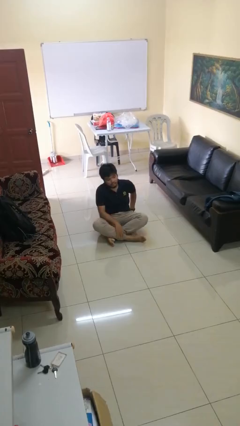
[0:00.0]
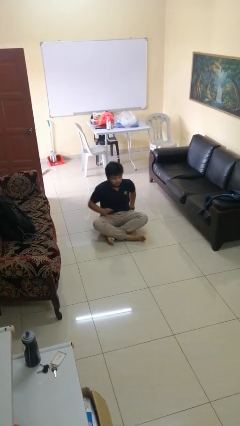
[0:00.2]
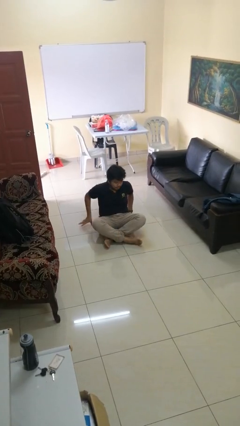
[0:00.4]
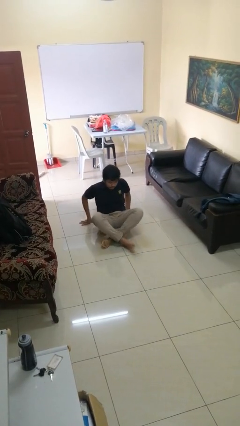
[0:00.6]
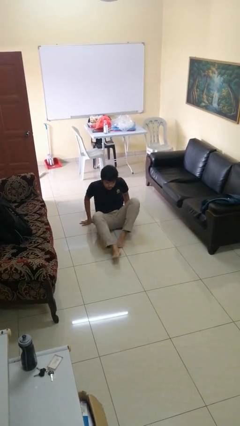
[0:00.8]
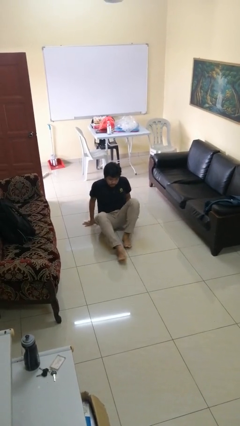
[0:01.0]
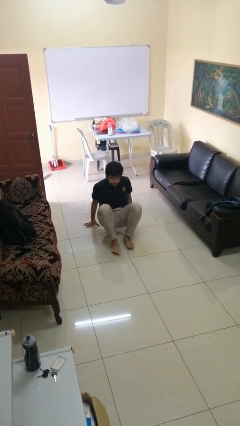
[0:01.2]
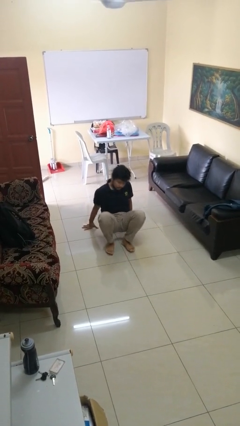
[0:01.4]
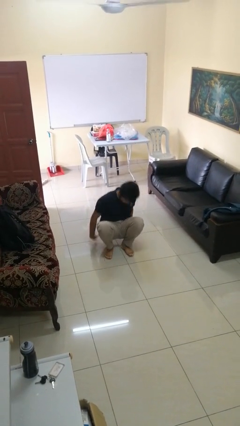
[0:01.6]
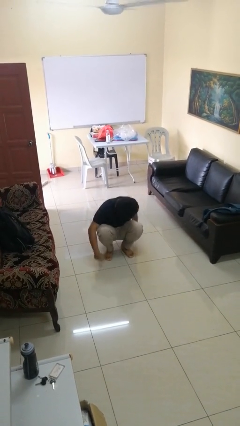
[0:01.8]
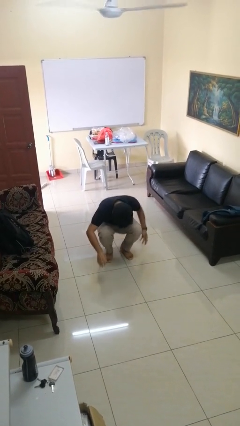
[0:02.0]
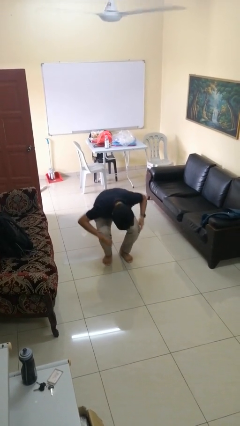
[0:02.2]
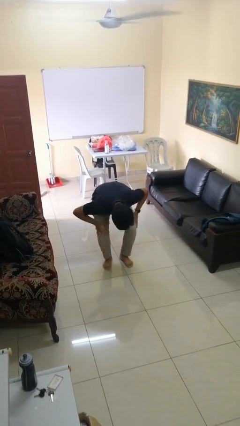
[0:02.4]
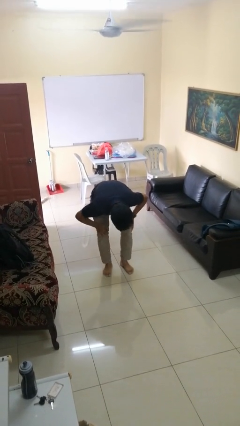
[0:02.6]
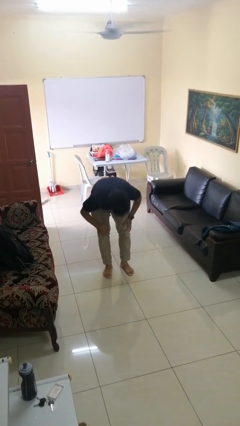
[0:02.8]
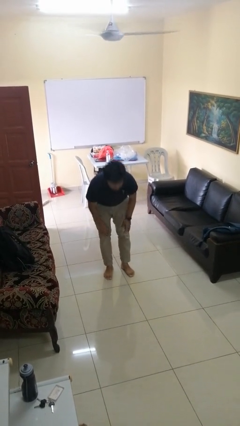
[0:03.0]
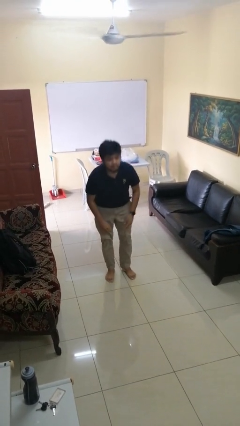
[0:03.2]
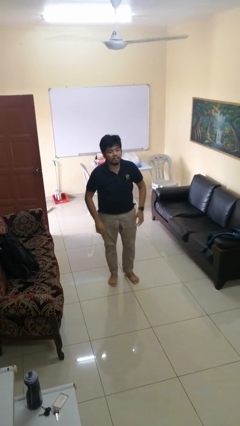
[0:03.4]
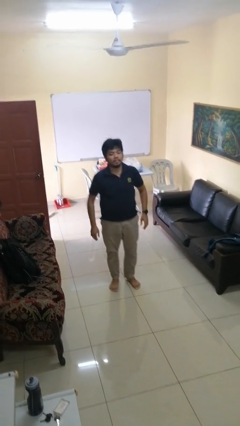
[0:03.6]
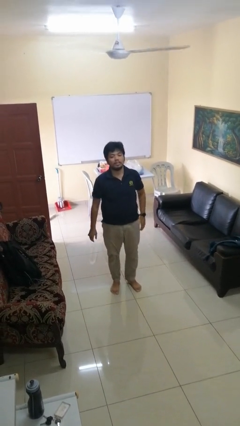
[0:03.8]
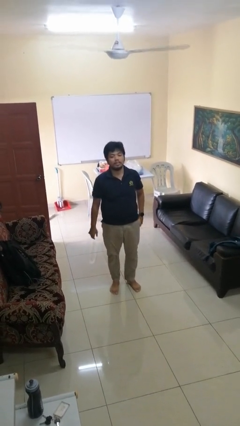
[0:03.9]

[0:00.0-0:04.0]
person stands up from floor

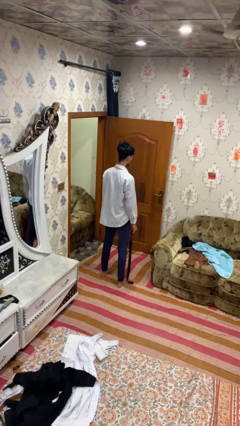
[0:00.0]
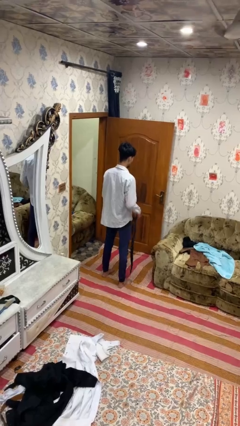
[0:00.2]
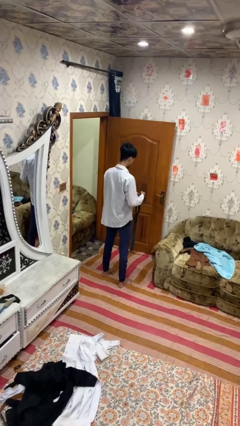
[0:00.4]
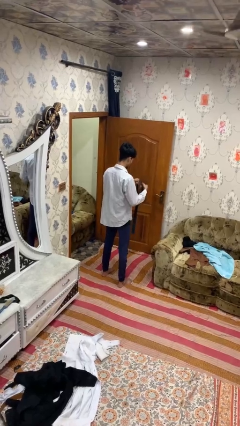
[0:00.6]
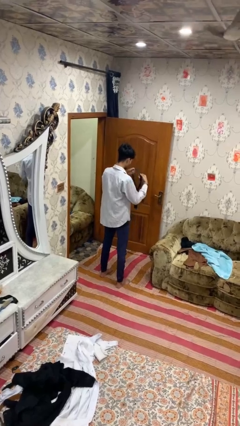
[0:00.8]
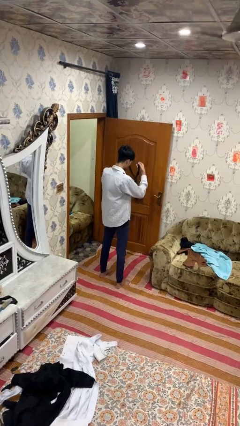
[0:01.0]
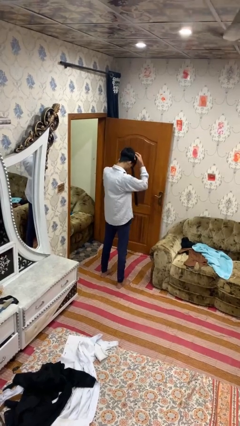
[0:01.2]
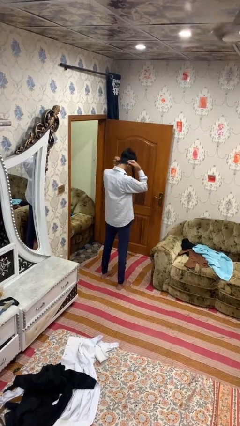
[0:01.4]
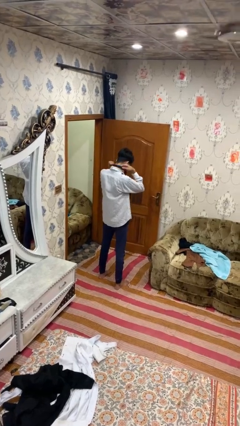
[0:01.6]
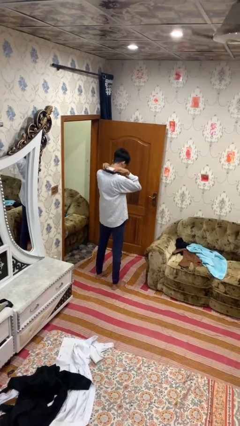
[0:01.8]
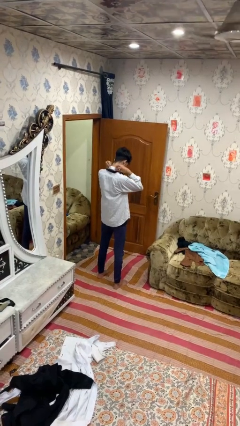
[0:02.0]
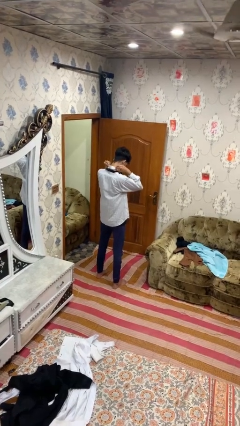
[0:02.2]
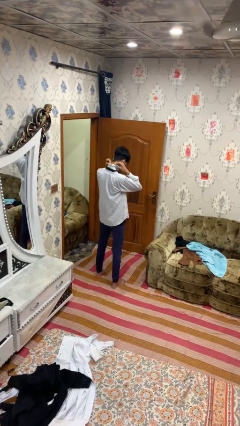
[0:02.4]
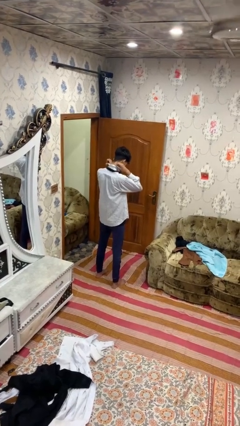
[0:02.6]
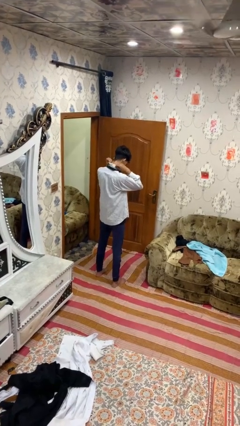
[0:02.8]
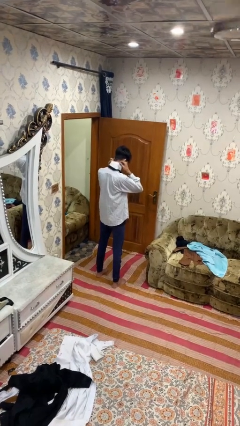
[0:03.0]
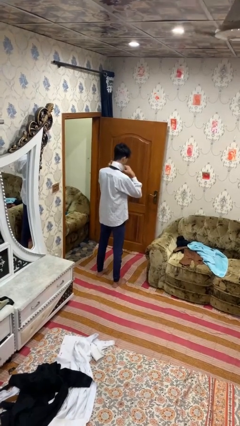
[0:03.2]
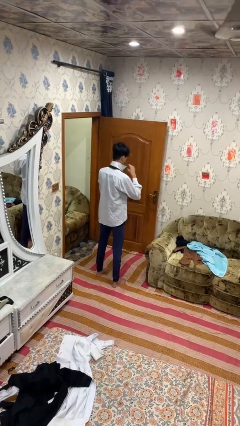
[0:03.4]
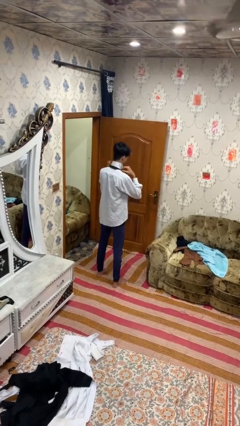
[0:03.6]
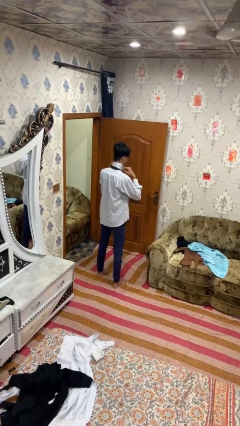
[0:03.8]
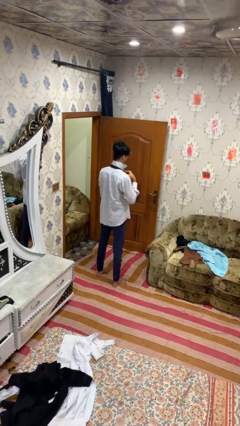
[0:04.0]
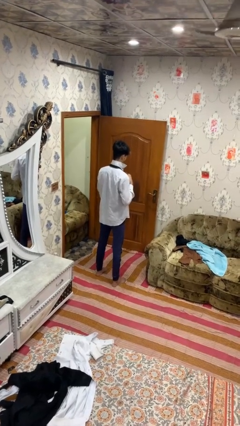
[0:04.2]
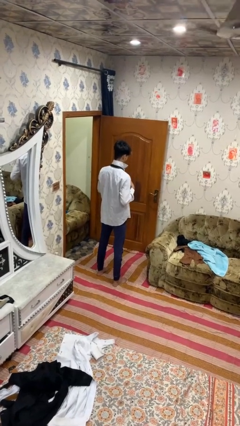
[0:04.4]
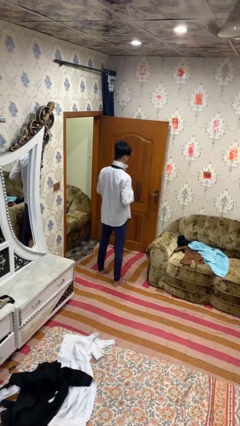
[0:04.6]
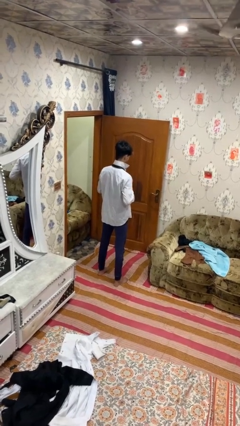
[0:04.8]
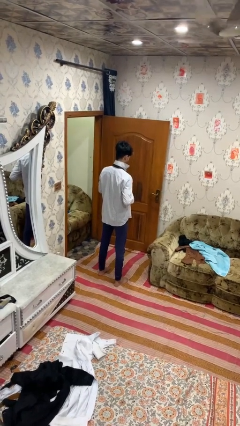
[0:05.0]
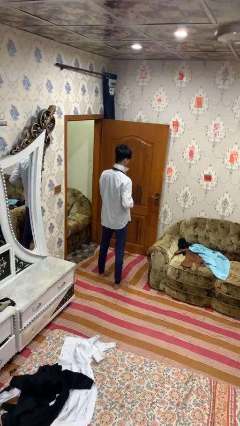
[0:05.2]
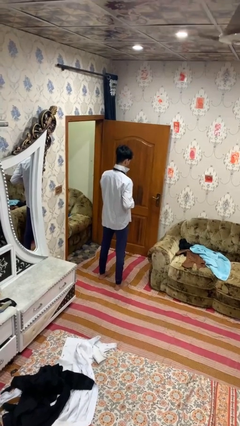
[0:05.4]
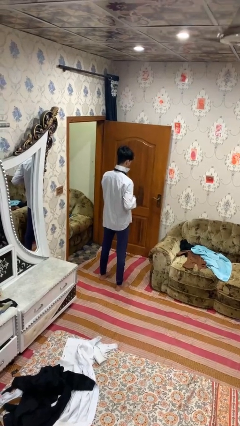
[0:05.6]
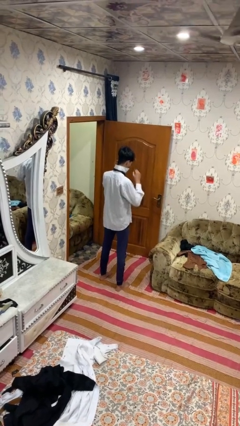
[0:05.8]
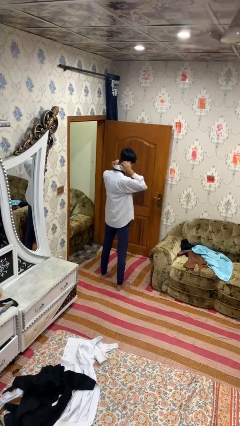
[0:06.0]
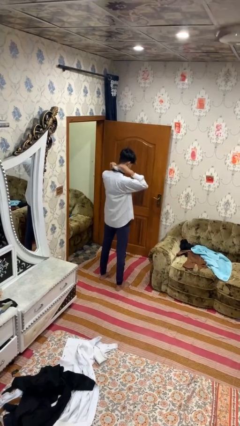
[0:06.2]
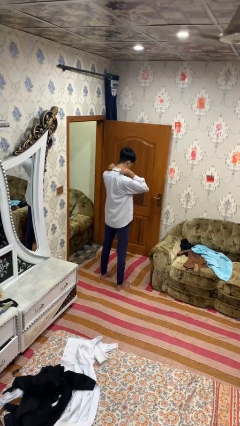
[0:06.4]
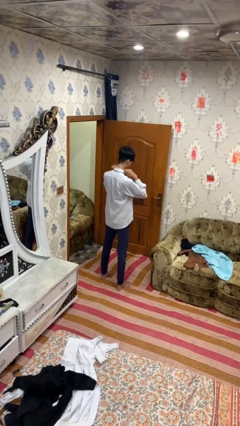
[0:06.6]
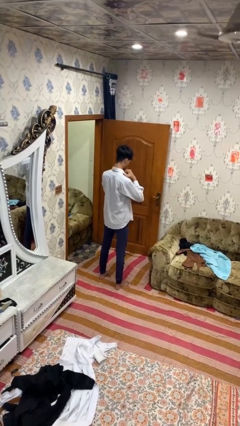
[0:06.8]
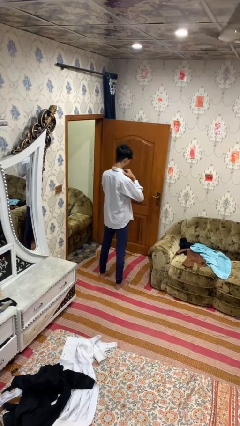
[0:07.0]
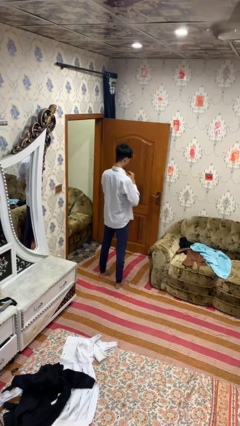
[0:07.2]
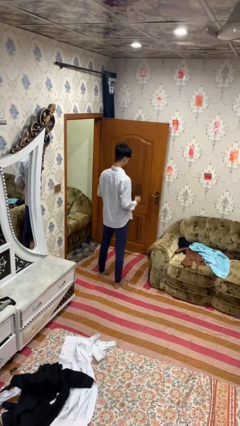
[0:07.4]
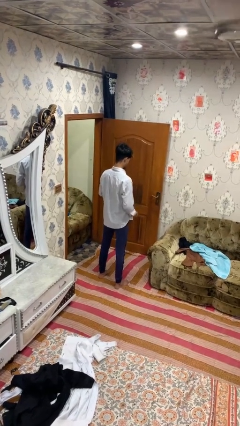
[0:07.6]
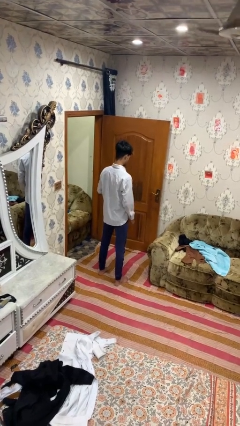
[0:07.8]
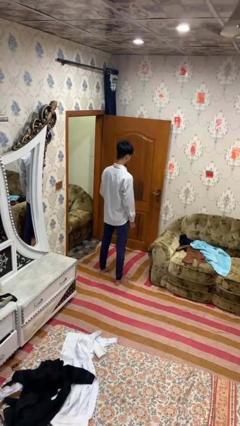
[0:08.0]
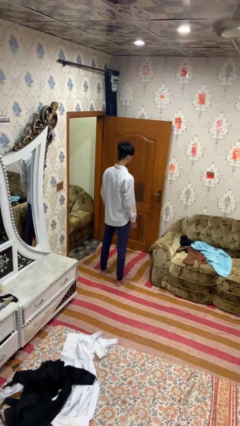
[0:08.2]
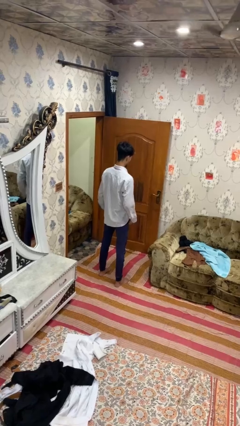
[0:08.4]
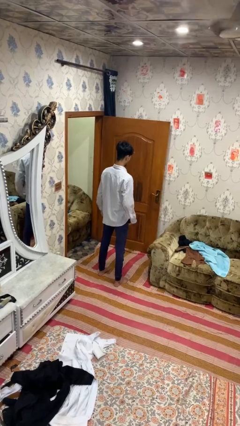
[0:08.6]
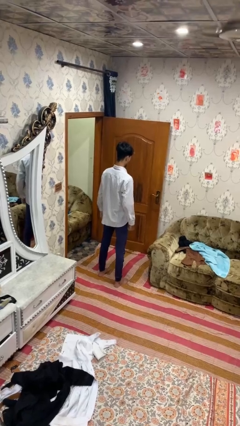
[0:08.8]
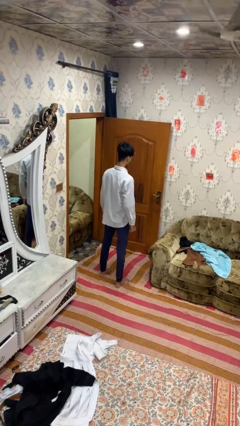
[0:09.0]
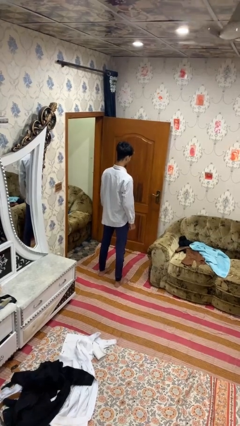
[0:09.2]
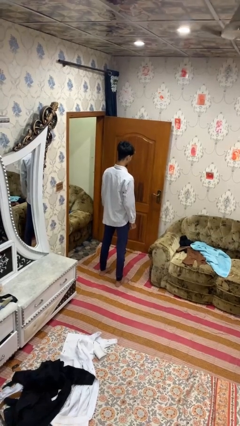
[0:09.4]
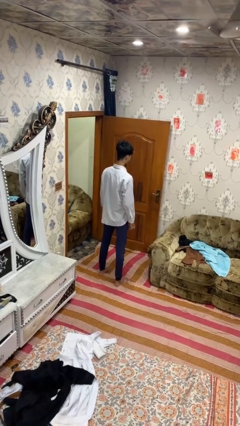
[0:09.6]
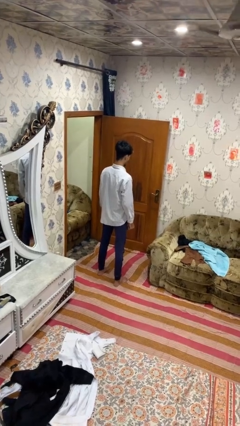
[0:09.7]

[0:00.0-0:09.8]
person puts on necktie

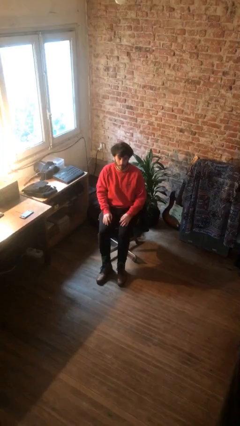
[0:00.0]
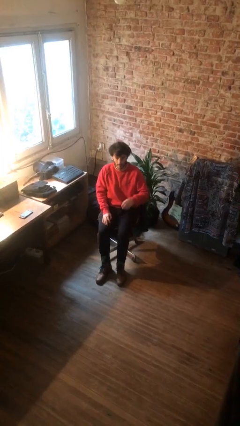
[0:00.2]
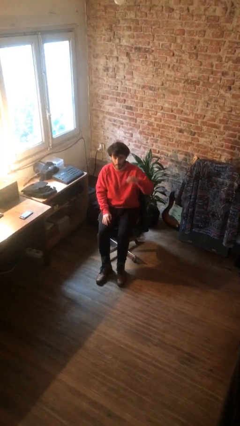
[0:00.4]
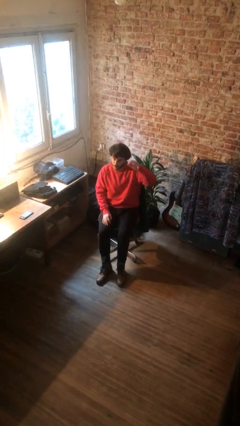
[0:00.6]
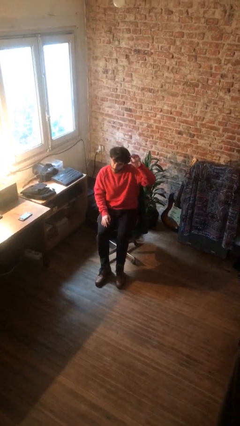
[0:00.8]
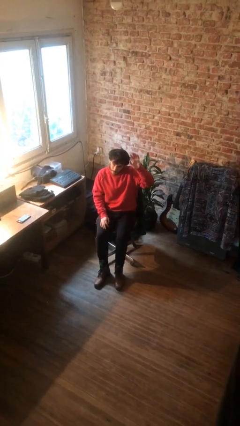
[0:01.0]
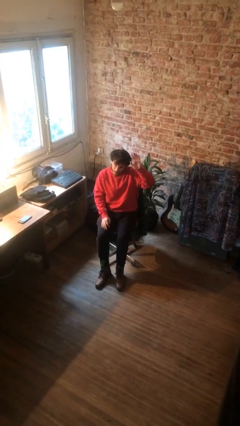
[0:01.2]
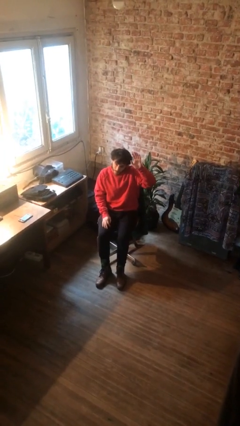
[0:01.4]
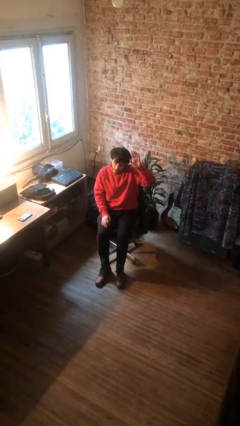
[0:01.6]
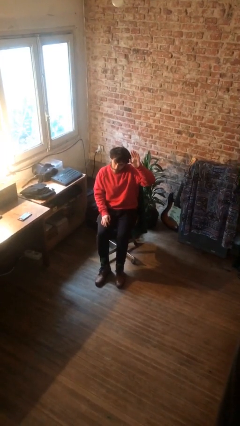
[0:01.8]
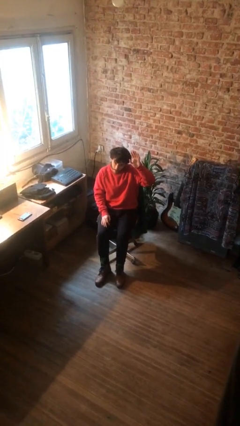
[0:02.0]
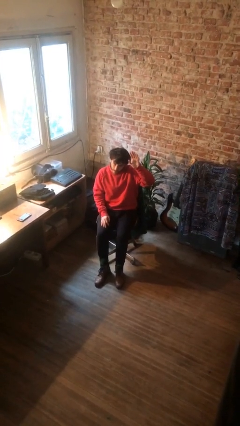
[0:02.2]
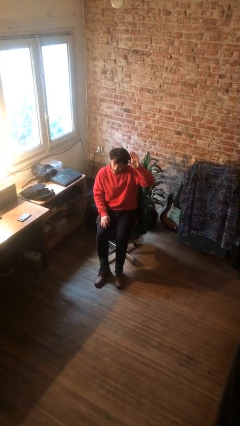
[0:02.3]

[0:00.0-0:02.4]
person gestures raise hand

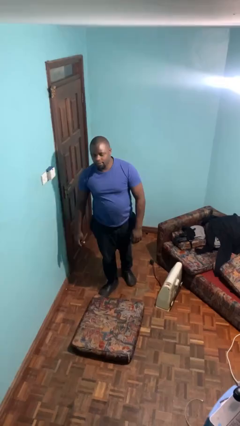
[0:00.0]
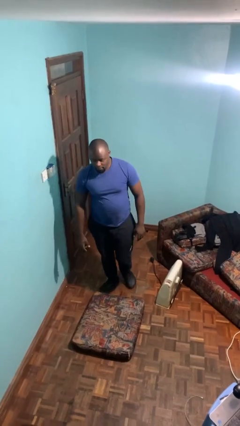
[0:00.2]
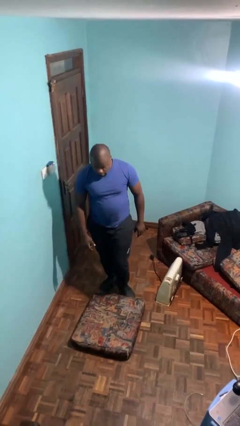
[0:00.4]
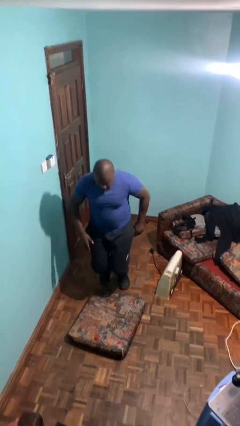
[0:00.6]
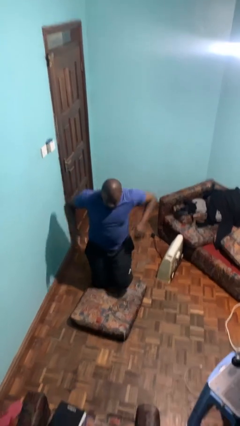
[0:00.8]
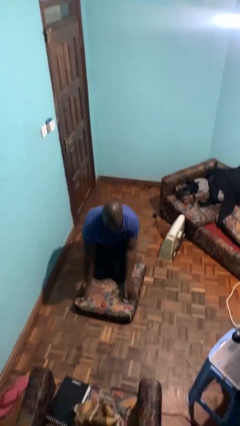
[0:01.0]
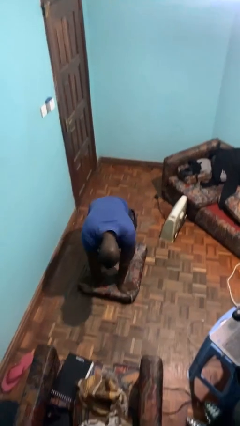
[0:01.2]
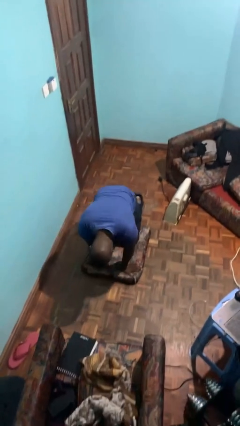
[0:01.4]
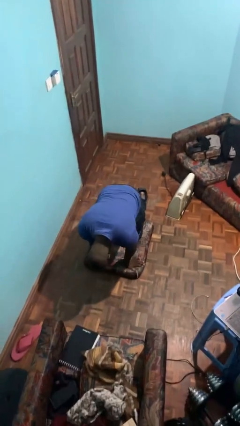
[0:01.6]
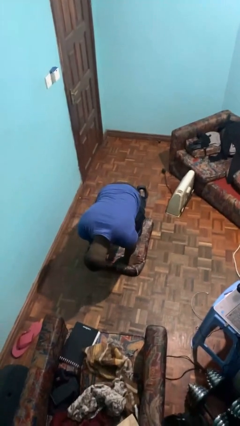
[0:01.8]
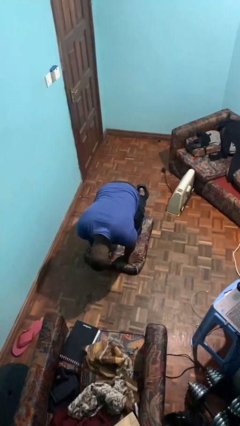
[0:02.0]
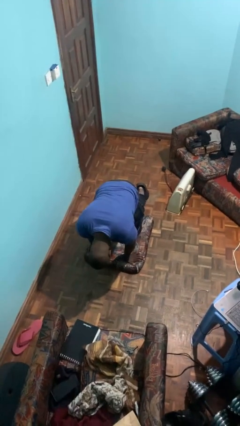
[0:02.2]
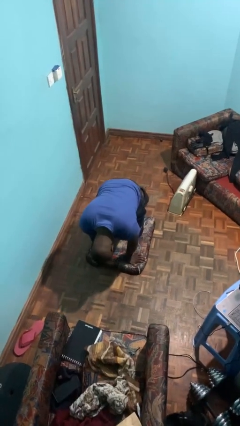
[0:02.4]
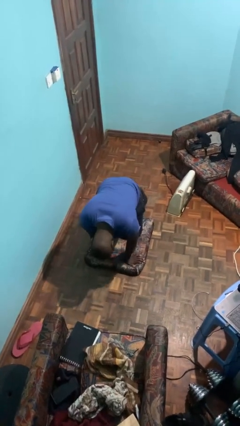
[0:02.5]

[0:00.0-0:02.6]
person trips on object on floor
